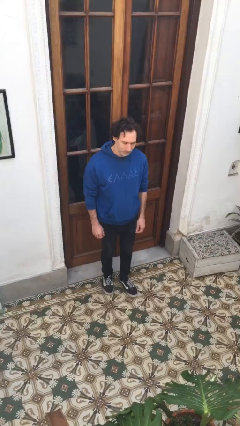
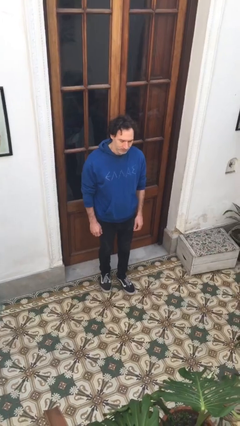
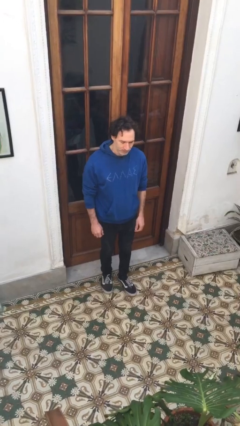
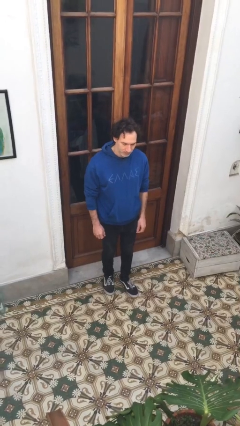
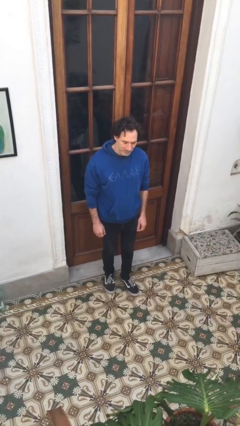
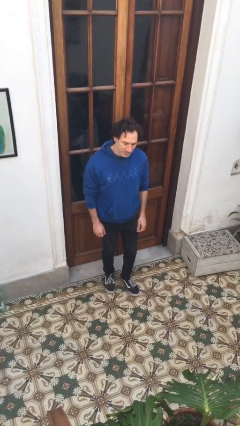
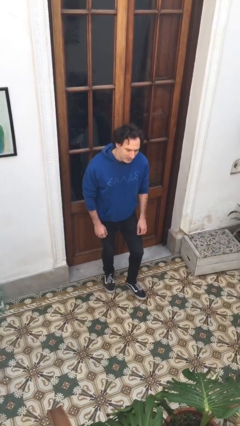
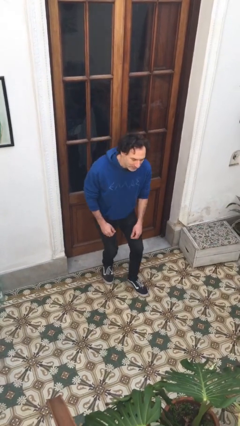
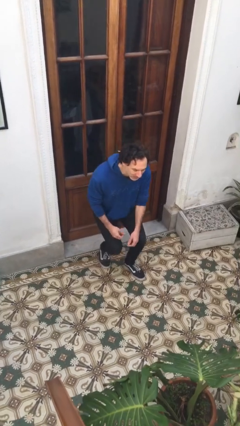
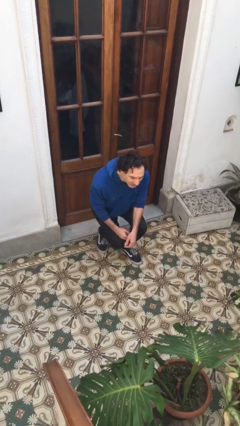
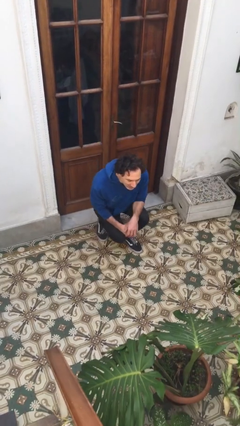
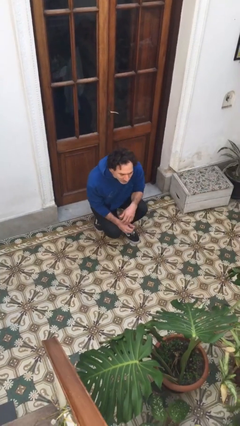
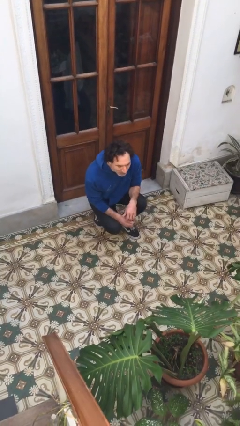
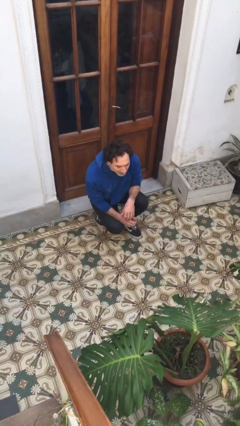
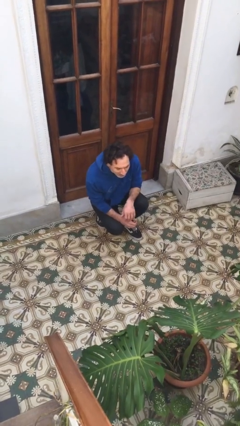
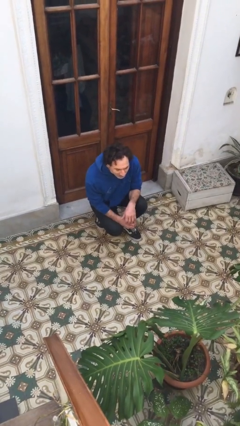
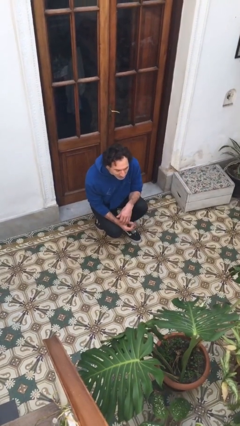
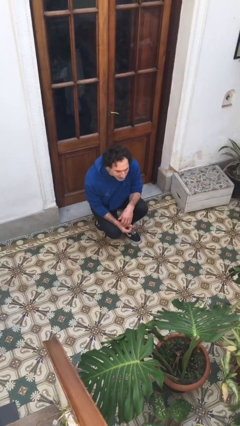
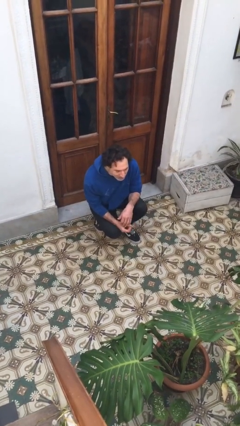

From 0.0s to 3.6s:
person squats

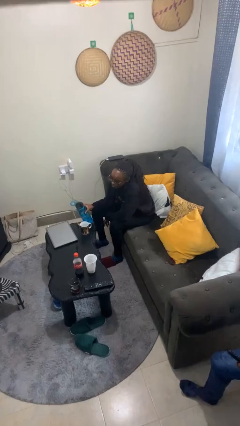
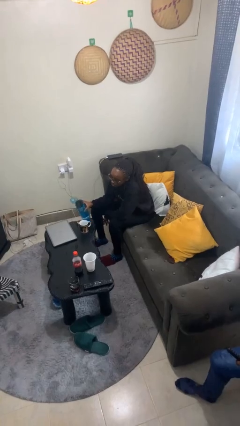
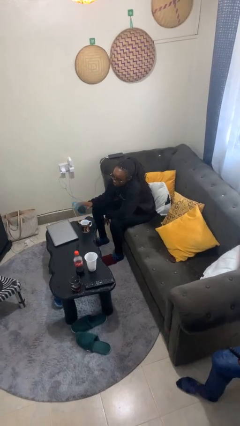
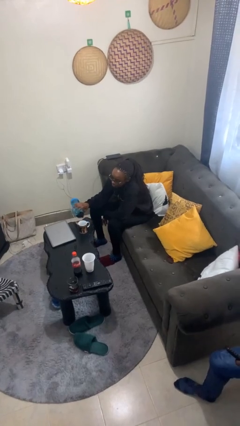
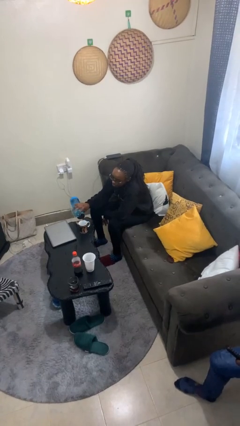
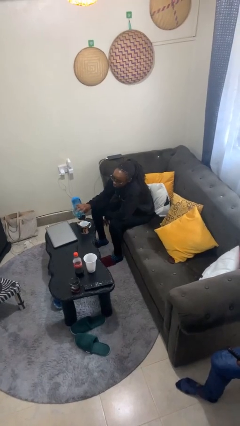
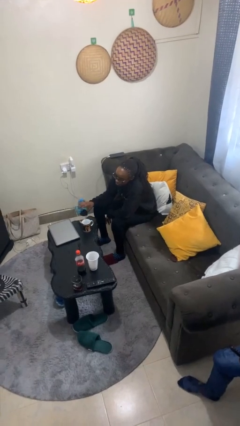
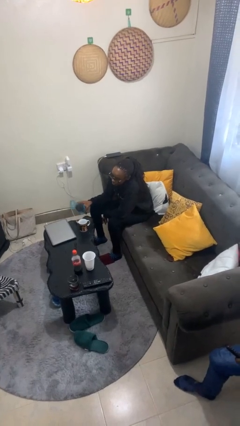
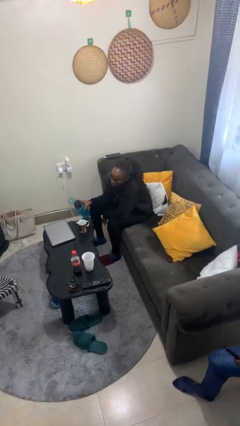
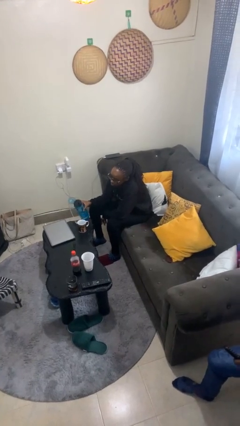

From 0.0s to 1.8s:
person pours liquid into cup

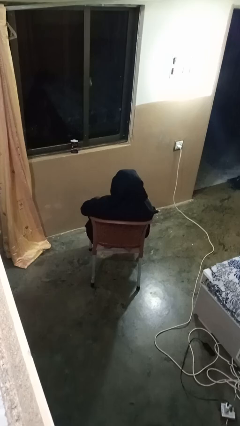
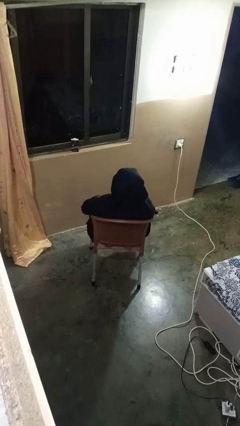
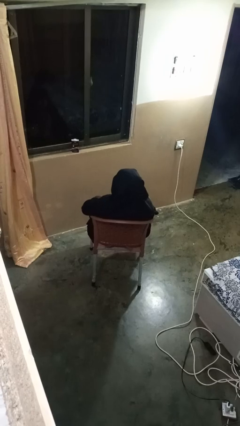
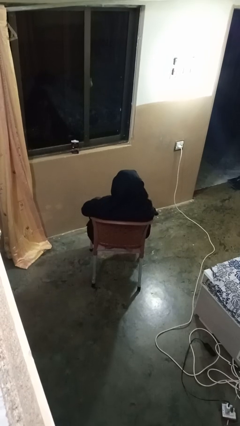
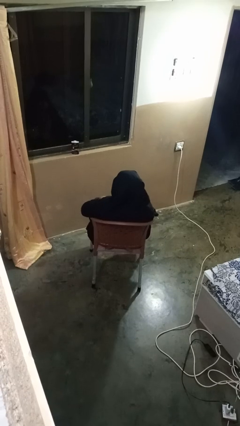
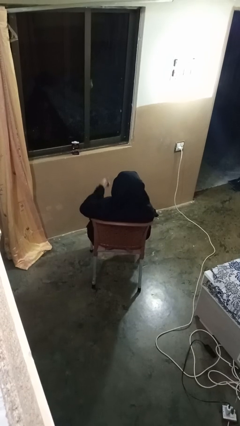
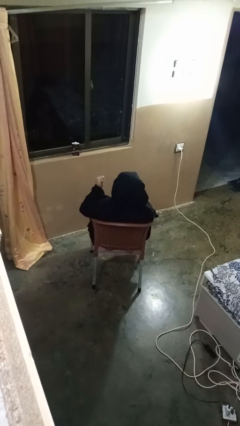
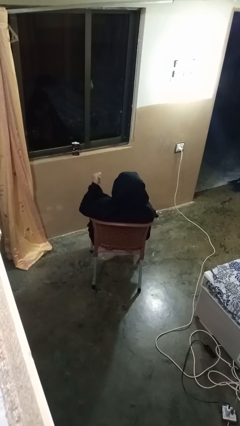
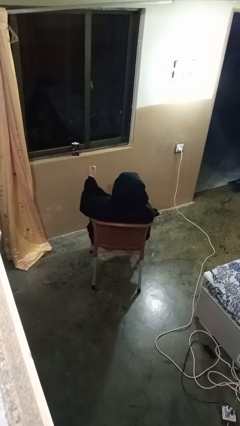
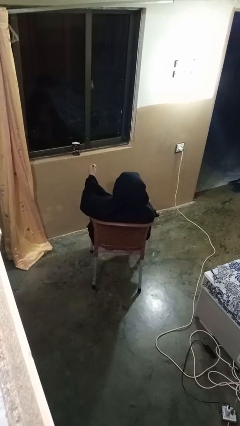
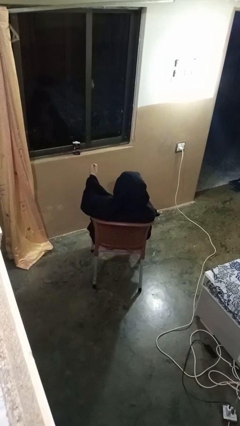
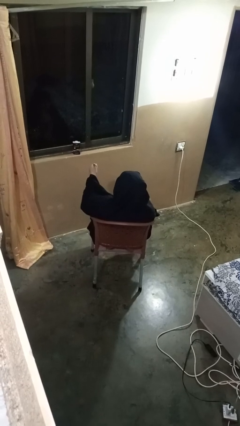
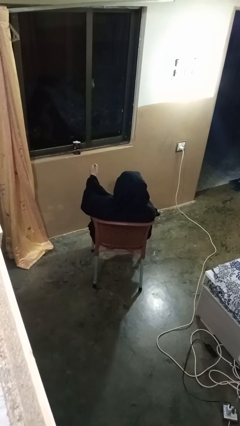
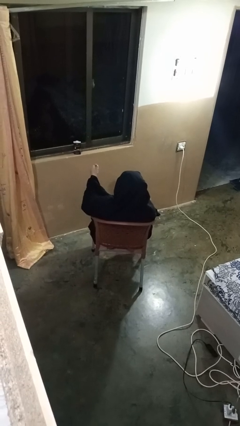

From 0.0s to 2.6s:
person gestures thumbs up

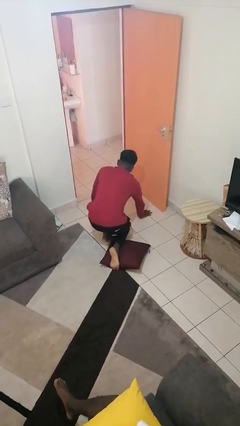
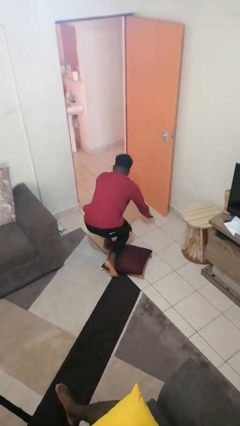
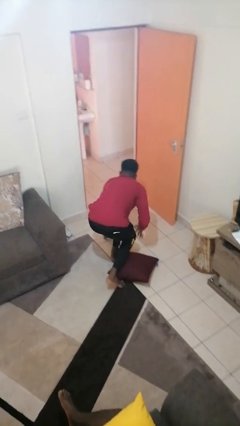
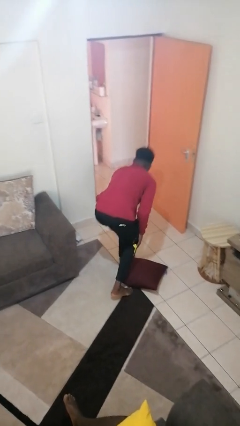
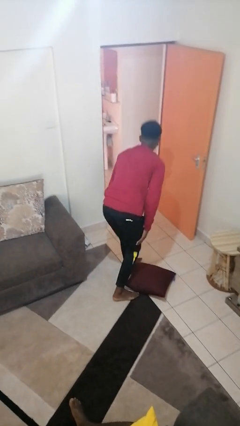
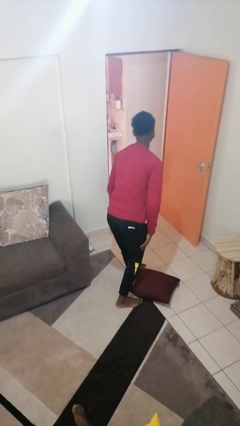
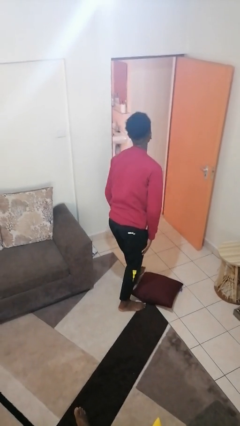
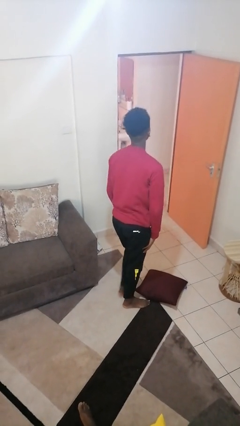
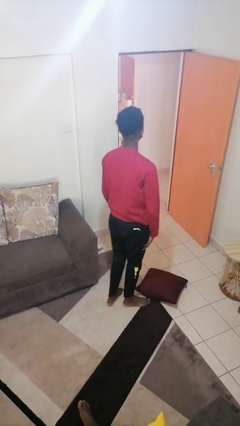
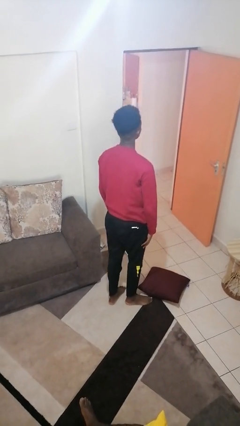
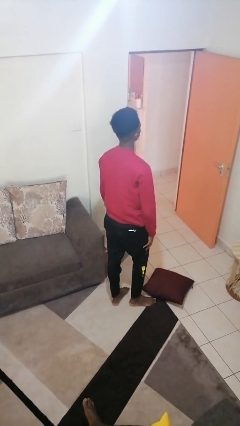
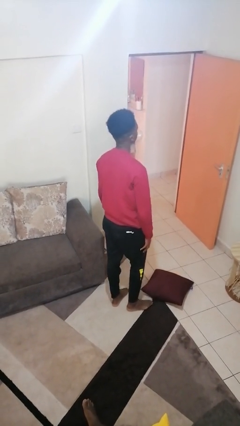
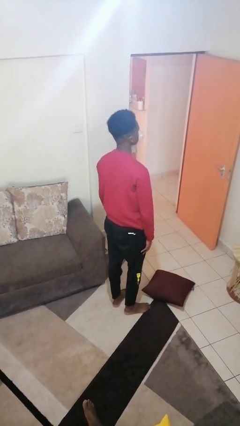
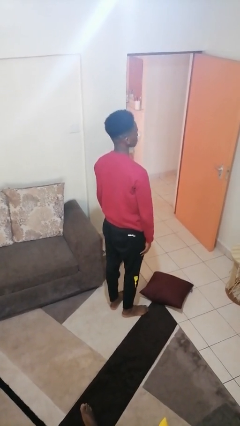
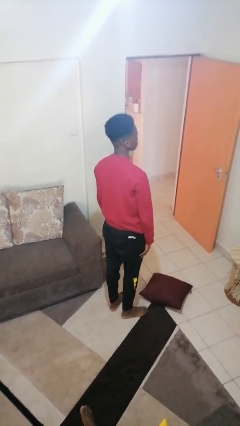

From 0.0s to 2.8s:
person stands up from floor

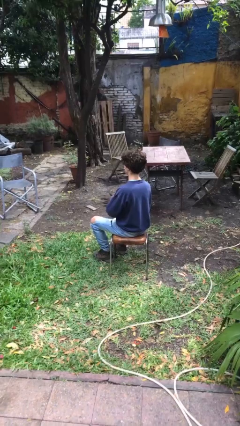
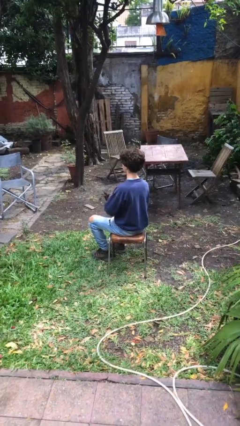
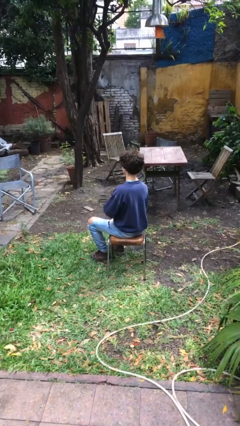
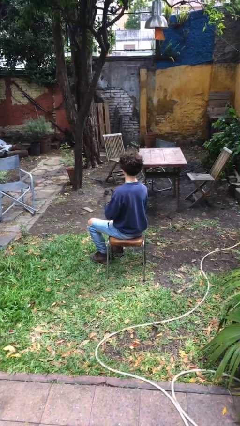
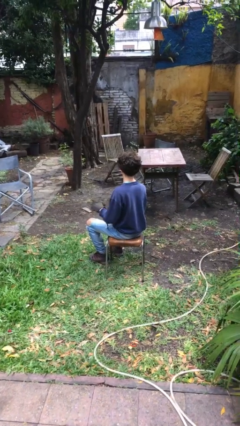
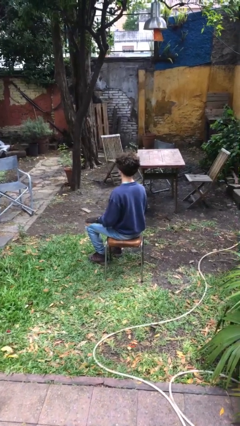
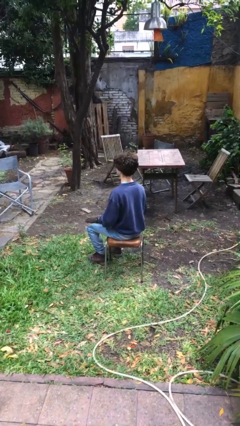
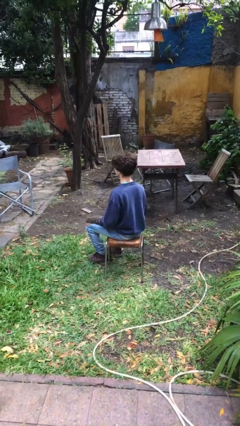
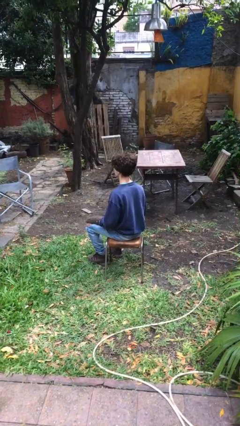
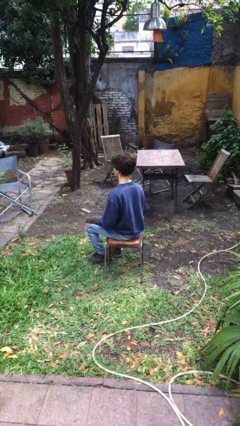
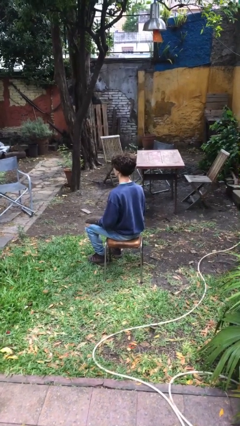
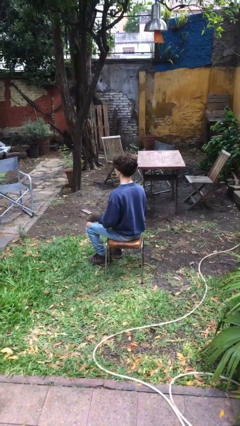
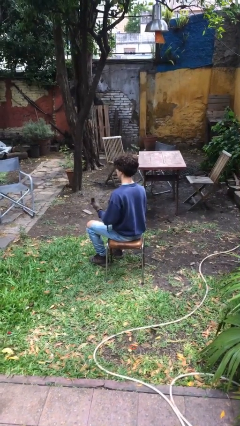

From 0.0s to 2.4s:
person puts on gloves

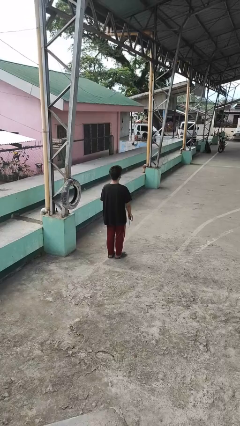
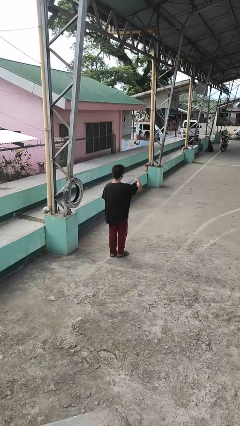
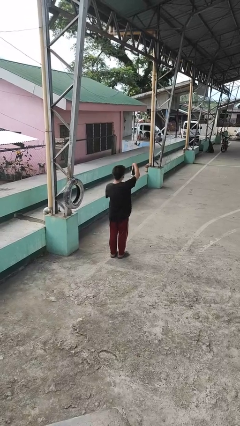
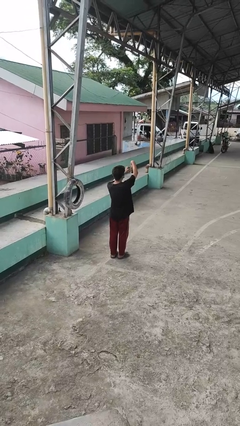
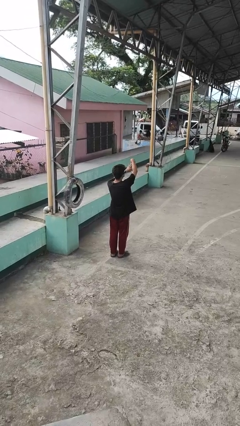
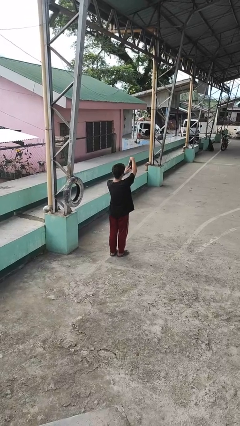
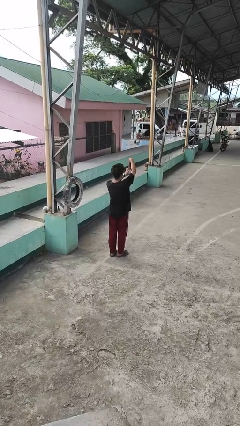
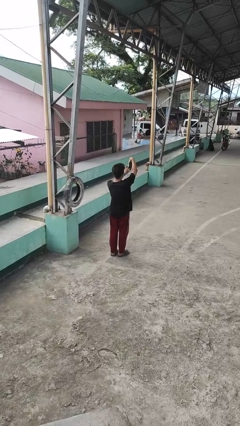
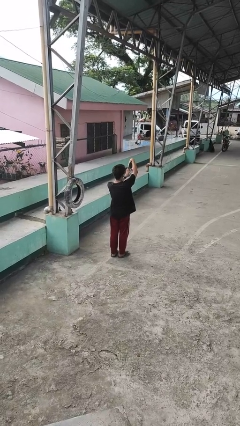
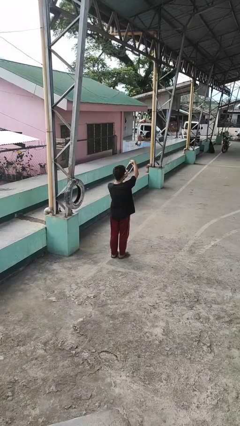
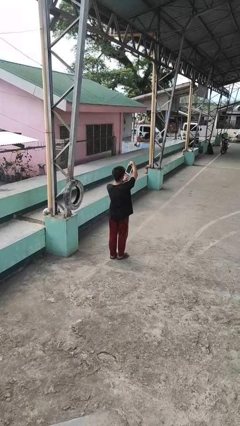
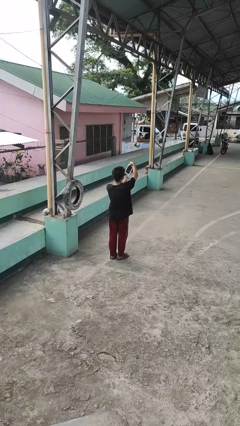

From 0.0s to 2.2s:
person interacts with tablet

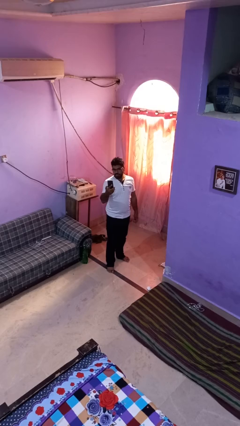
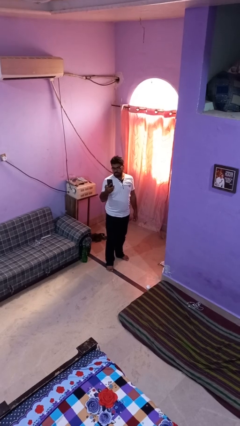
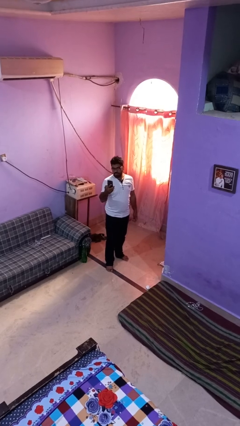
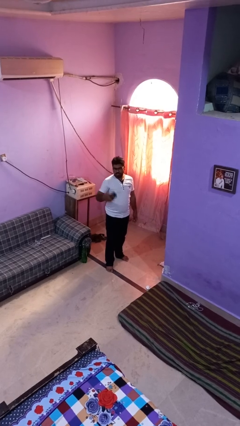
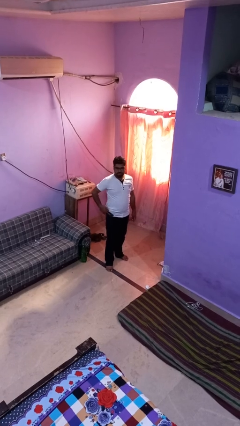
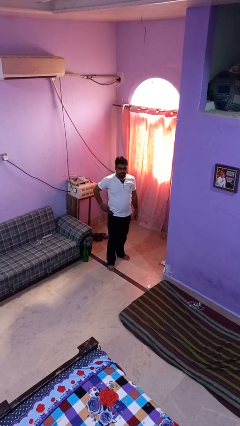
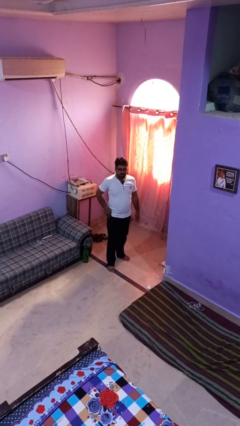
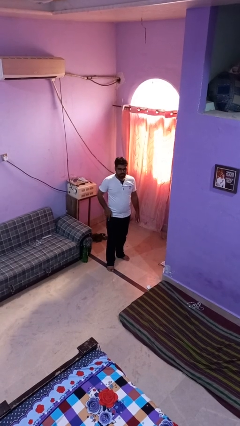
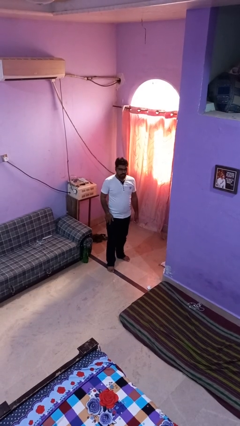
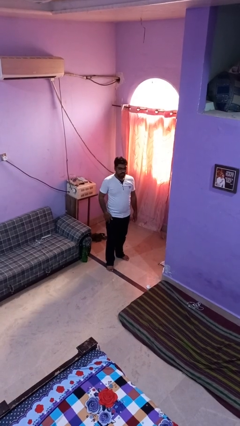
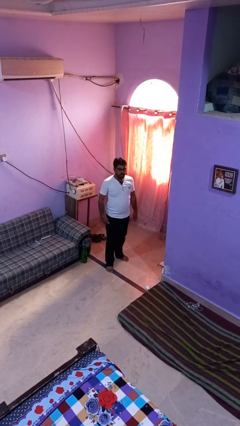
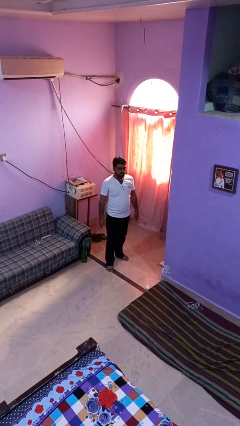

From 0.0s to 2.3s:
person puts phone into pocket
